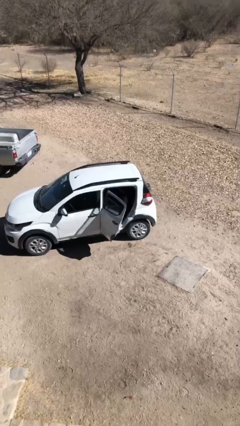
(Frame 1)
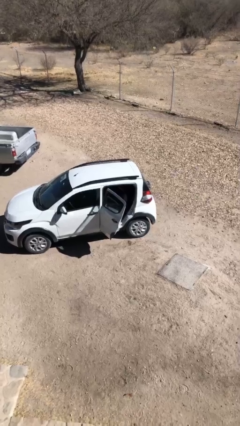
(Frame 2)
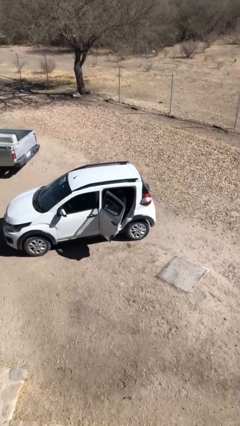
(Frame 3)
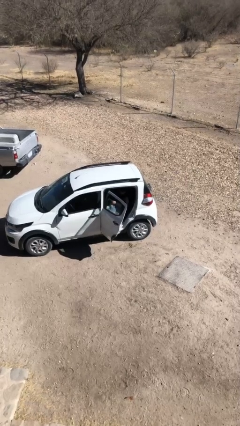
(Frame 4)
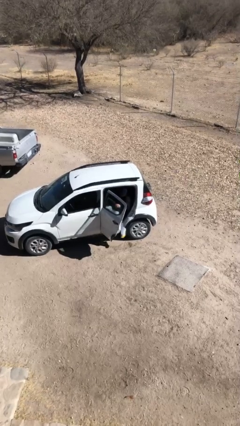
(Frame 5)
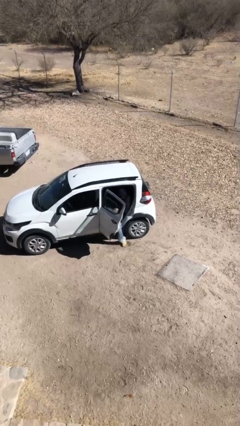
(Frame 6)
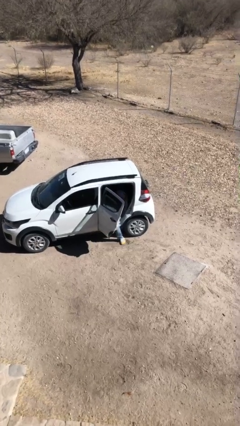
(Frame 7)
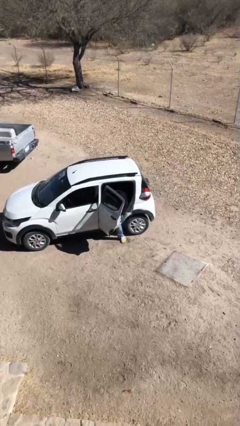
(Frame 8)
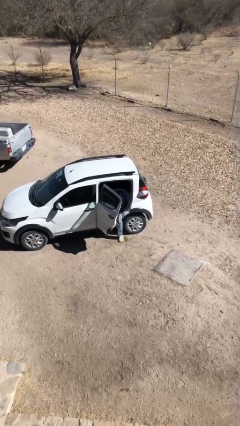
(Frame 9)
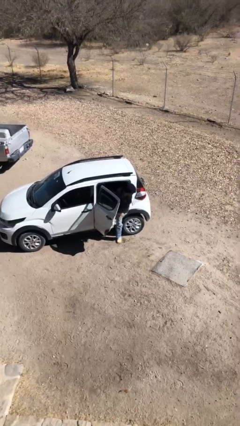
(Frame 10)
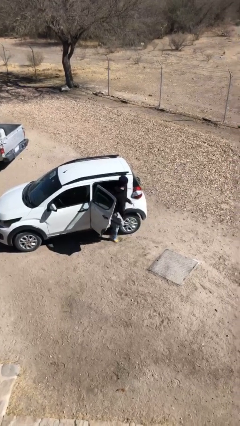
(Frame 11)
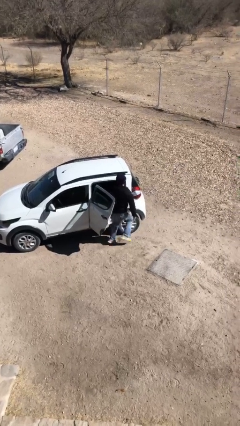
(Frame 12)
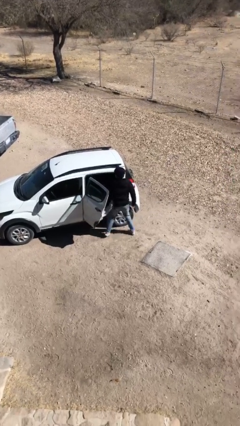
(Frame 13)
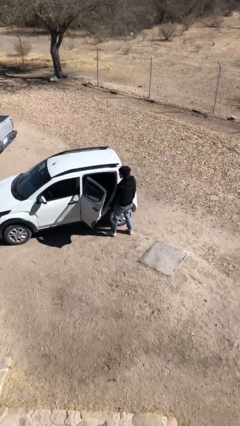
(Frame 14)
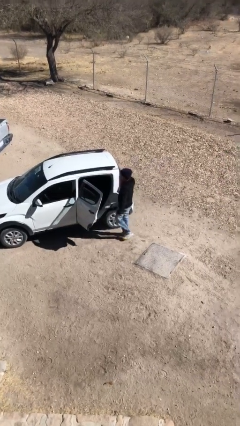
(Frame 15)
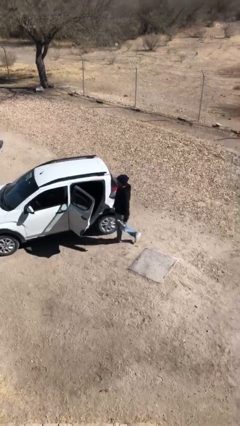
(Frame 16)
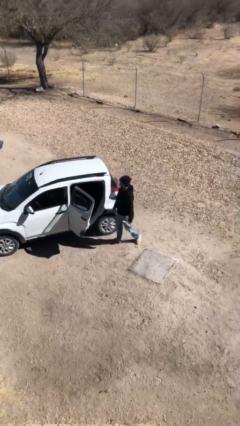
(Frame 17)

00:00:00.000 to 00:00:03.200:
person exits car

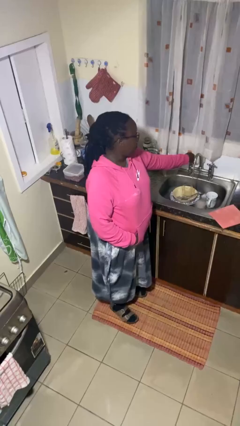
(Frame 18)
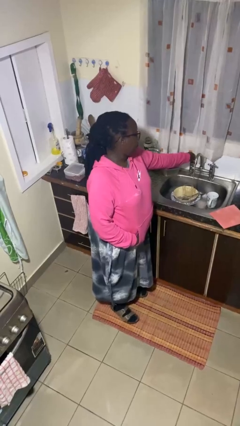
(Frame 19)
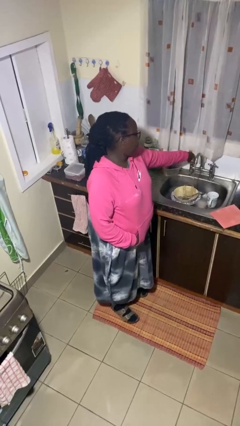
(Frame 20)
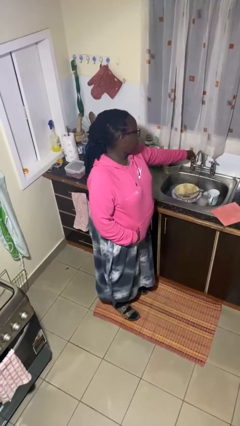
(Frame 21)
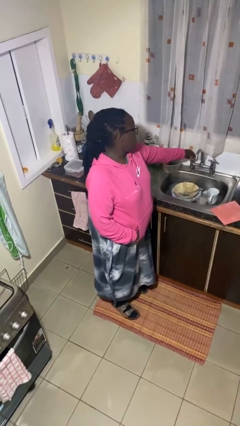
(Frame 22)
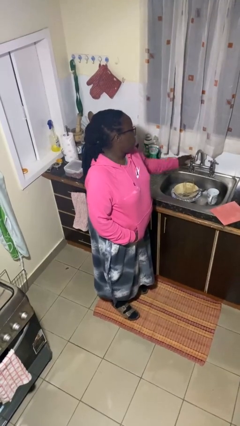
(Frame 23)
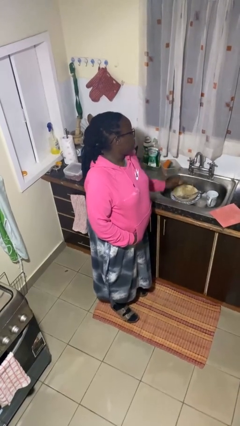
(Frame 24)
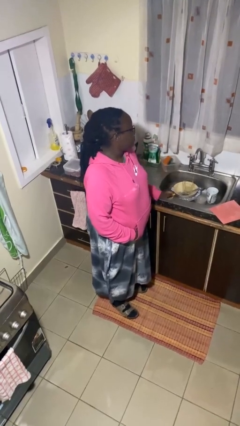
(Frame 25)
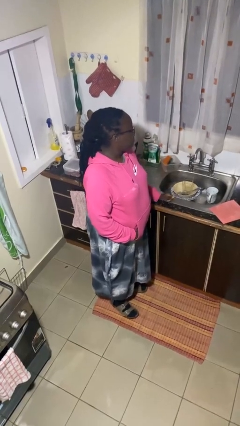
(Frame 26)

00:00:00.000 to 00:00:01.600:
person turns off faucet

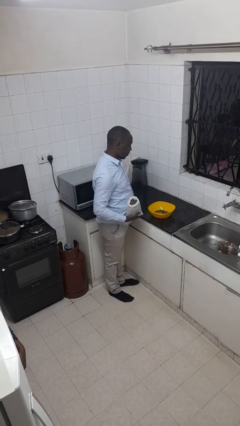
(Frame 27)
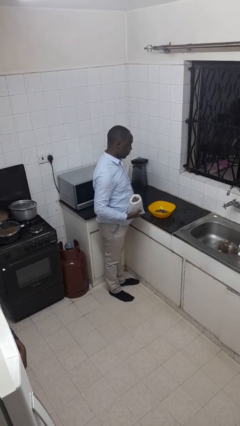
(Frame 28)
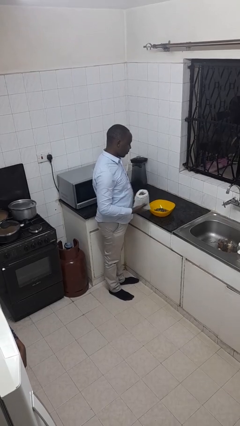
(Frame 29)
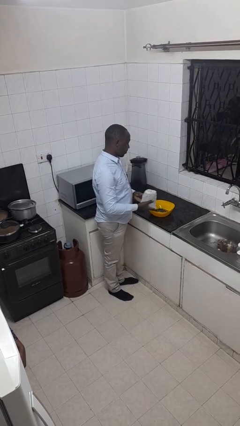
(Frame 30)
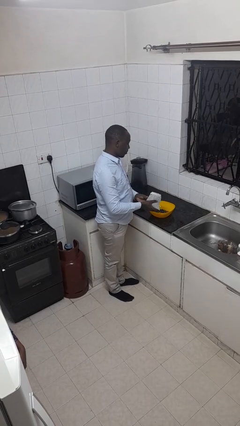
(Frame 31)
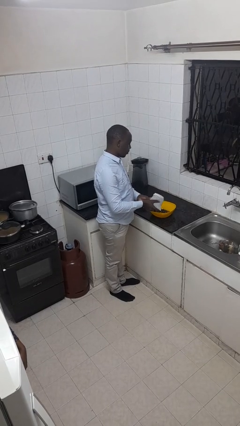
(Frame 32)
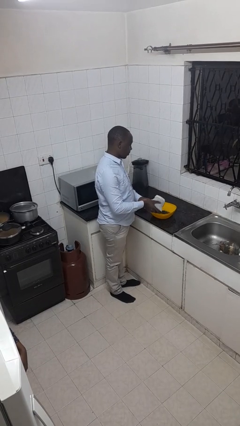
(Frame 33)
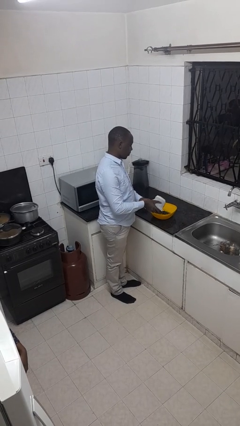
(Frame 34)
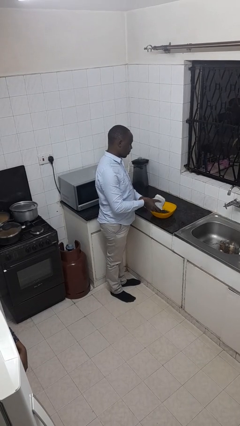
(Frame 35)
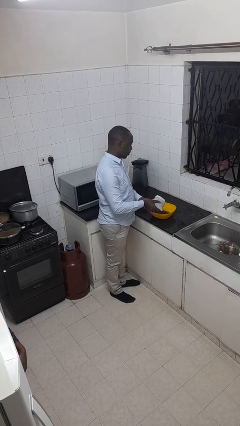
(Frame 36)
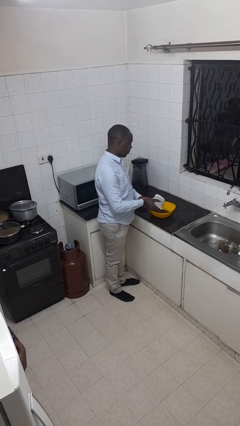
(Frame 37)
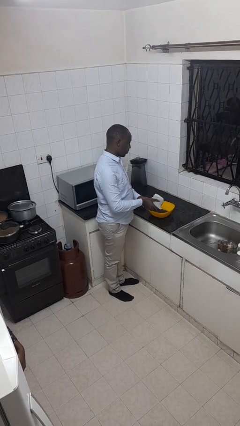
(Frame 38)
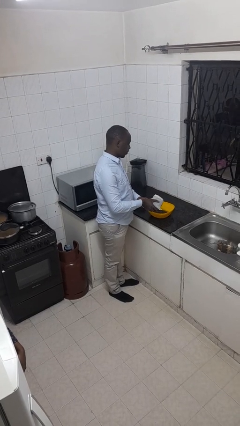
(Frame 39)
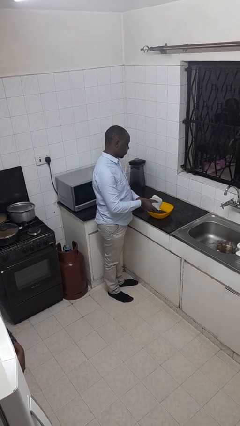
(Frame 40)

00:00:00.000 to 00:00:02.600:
person pours into bowl

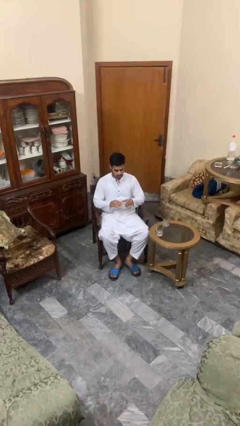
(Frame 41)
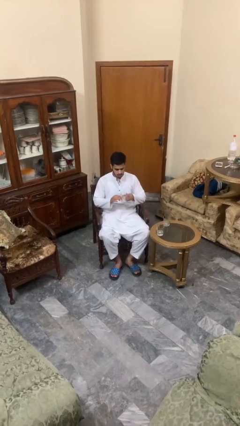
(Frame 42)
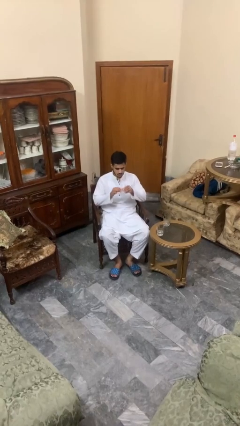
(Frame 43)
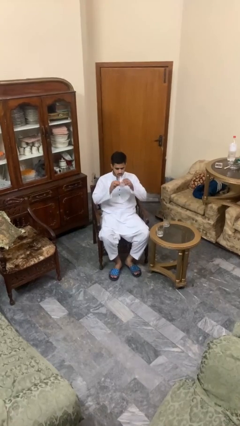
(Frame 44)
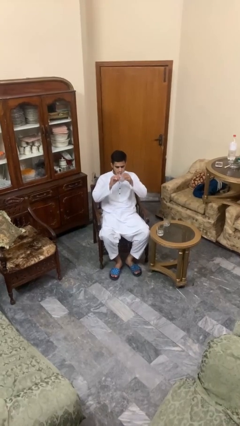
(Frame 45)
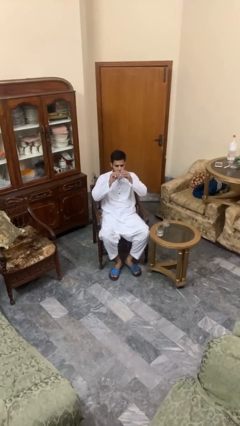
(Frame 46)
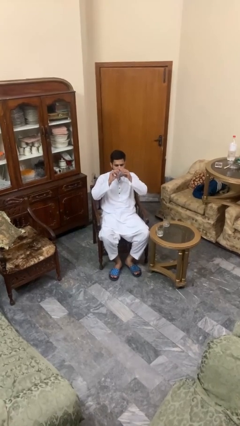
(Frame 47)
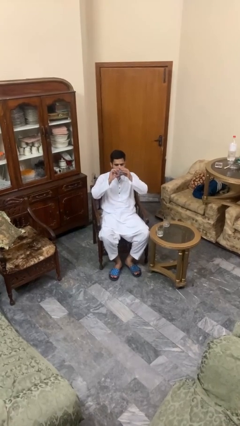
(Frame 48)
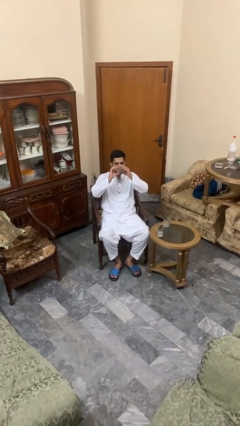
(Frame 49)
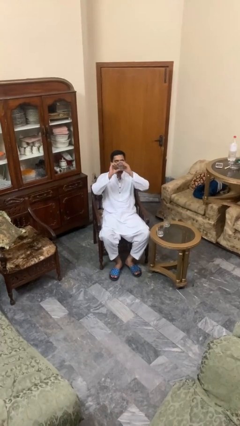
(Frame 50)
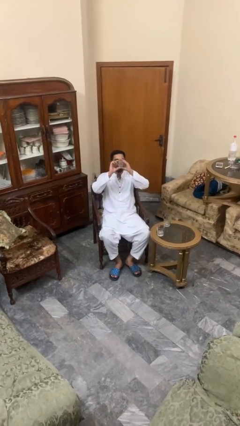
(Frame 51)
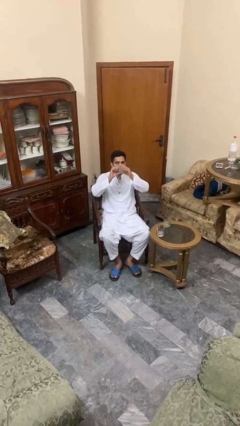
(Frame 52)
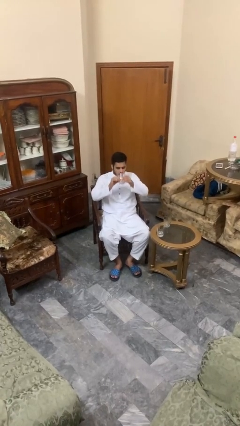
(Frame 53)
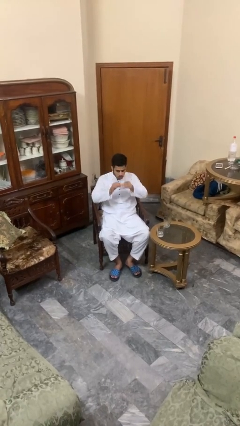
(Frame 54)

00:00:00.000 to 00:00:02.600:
person drinks from shotglass

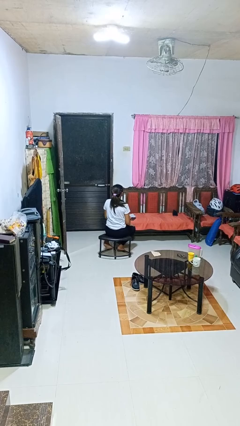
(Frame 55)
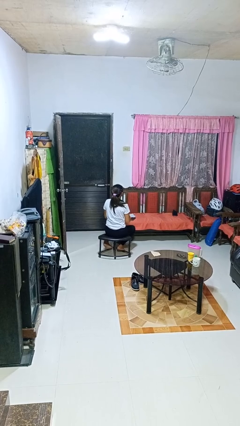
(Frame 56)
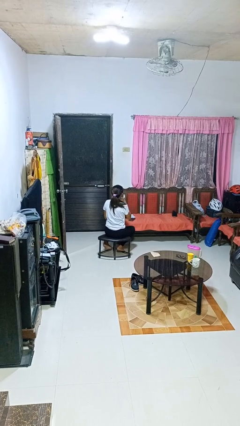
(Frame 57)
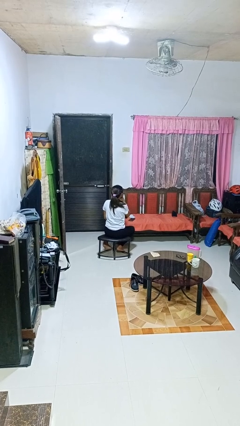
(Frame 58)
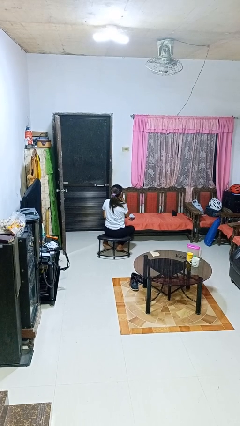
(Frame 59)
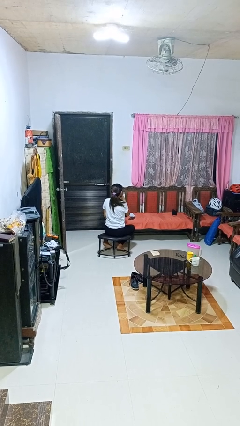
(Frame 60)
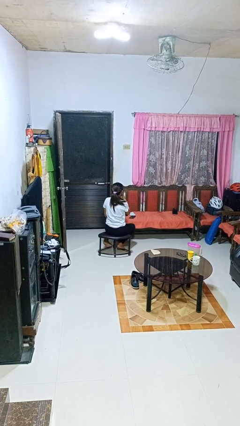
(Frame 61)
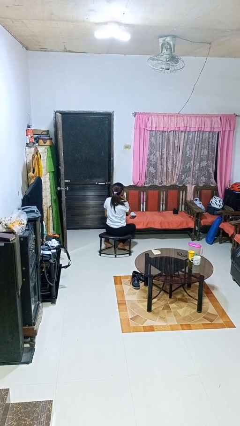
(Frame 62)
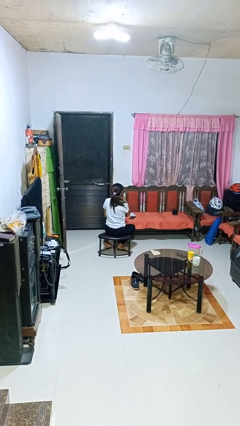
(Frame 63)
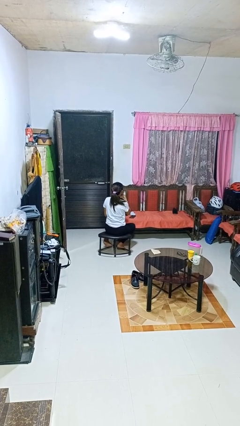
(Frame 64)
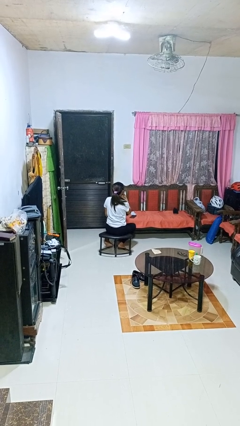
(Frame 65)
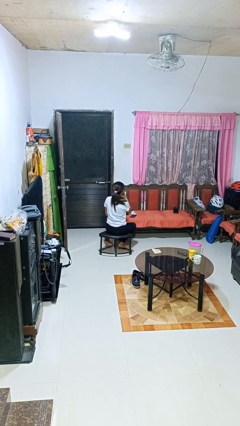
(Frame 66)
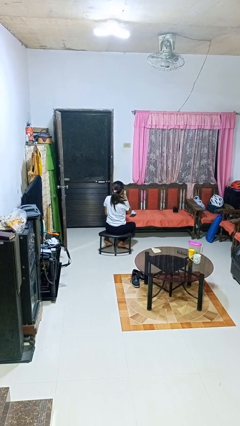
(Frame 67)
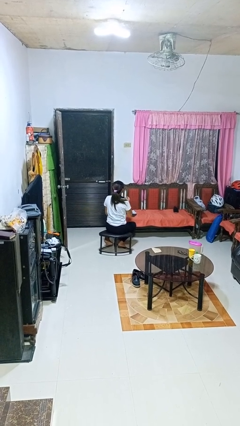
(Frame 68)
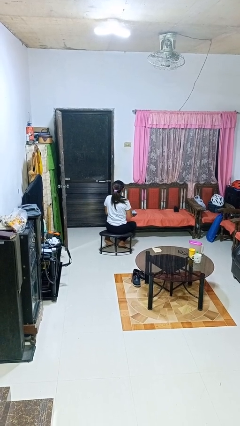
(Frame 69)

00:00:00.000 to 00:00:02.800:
person strokes chin

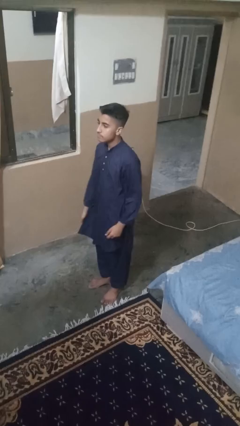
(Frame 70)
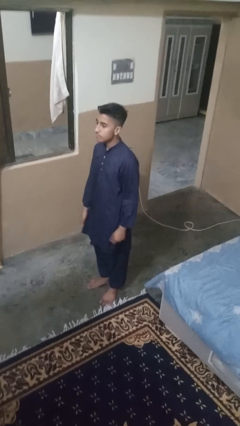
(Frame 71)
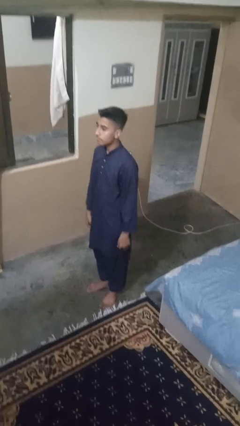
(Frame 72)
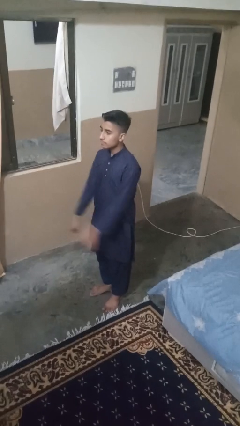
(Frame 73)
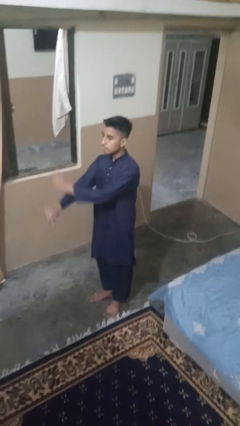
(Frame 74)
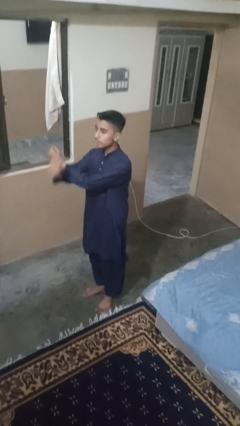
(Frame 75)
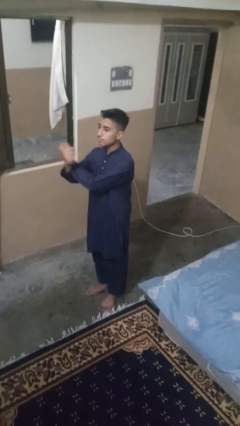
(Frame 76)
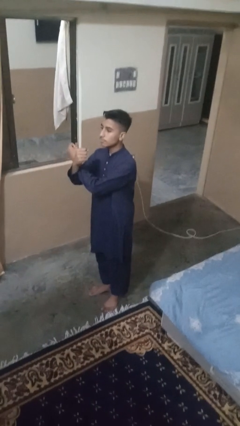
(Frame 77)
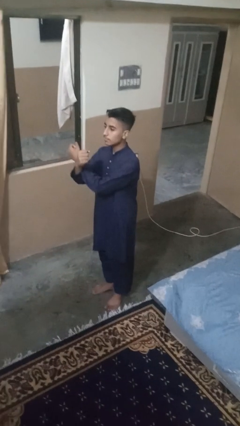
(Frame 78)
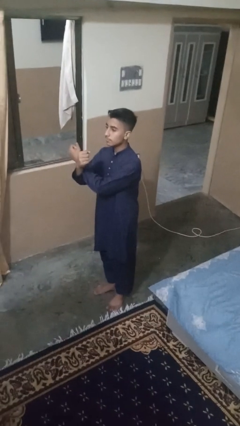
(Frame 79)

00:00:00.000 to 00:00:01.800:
person crosses arms

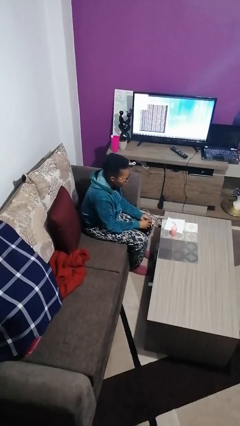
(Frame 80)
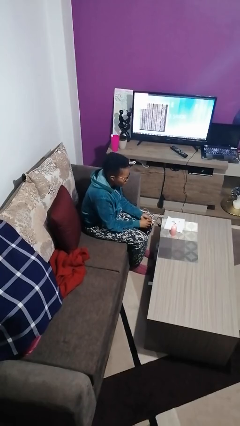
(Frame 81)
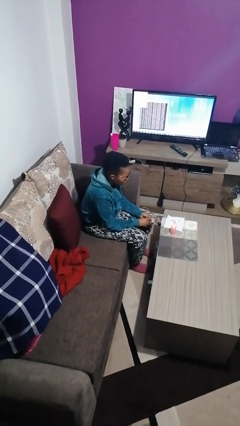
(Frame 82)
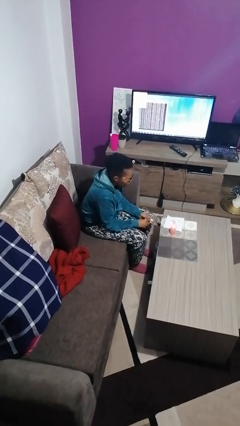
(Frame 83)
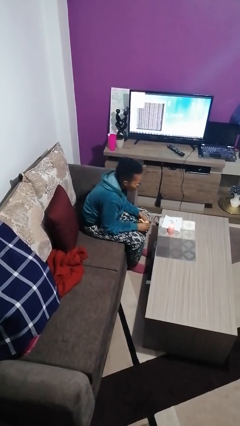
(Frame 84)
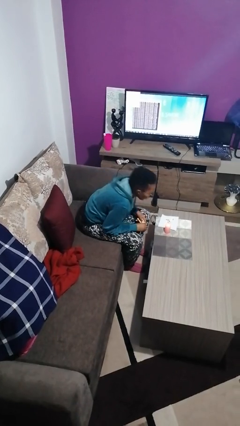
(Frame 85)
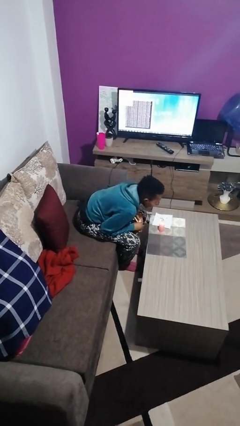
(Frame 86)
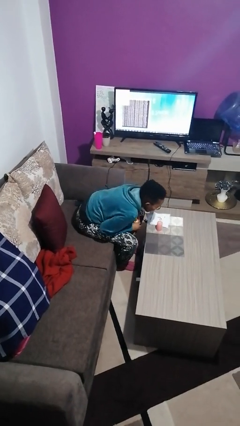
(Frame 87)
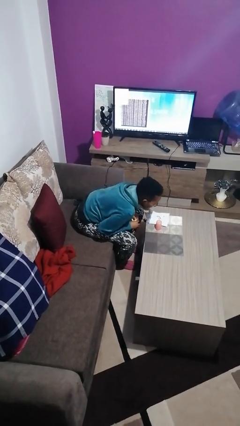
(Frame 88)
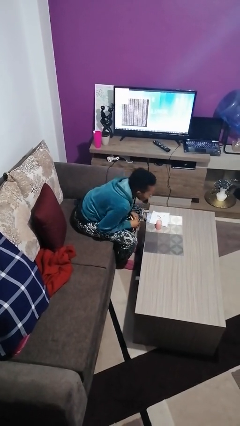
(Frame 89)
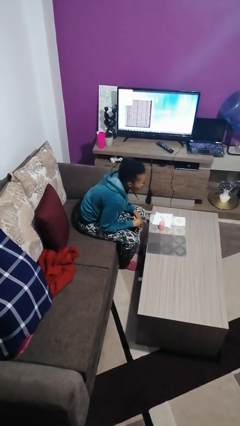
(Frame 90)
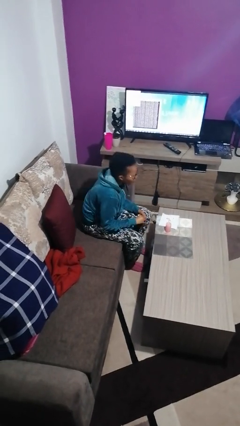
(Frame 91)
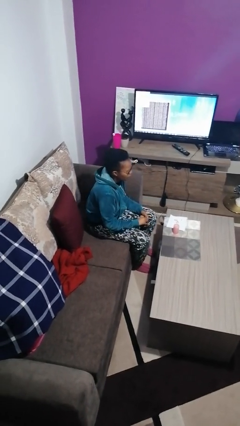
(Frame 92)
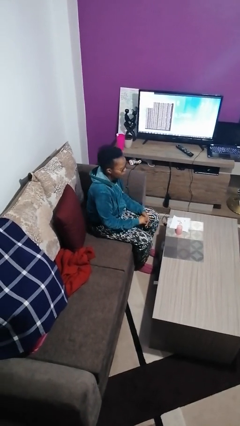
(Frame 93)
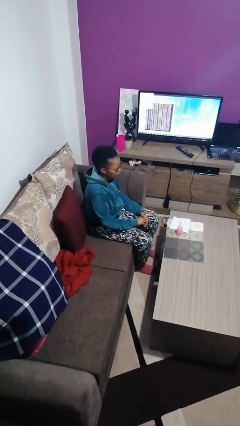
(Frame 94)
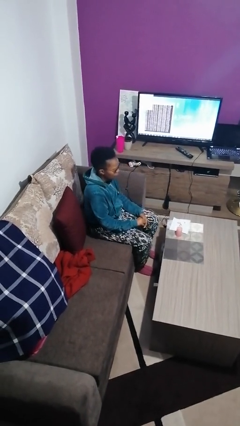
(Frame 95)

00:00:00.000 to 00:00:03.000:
person extinguishes candle
